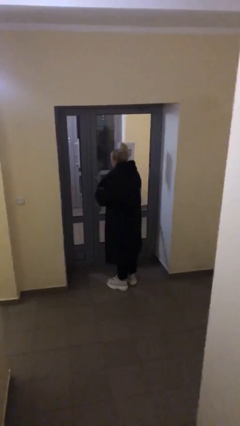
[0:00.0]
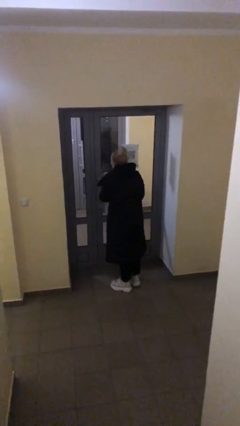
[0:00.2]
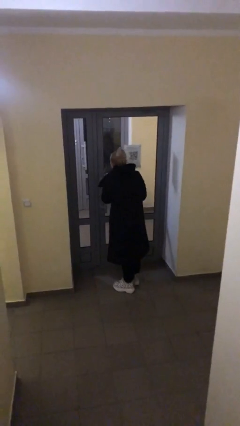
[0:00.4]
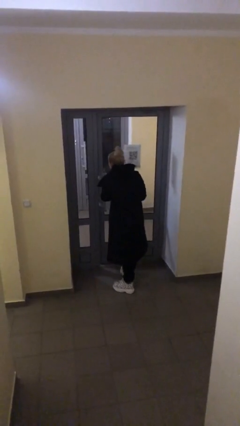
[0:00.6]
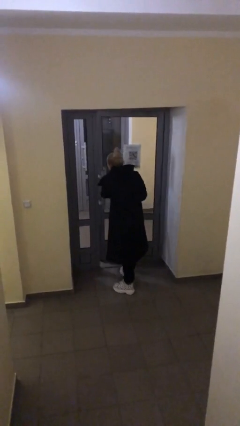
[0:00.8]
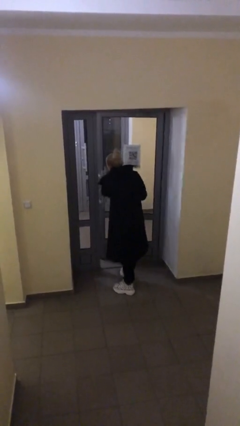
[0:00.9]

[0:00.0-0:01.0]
person opens facility door

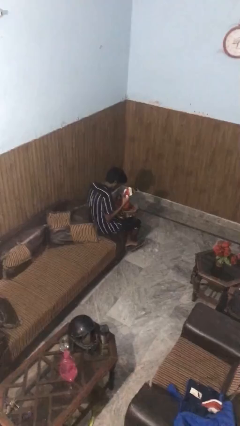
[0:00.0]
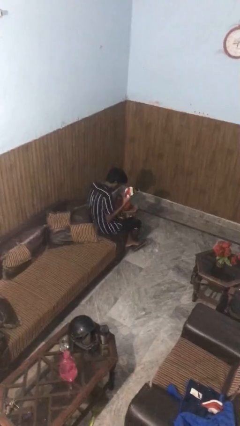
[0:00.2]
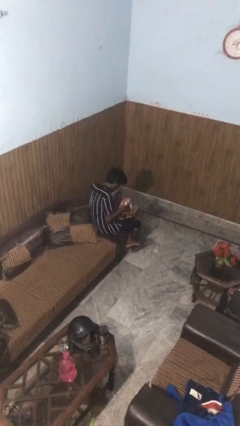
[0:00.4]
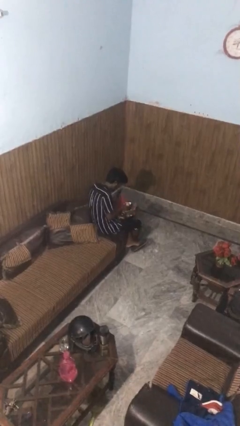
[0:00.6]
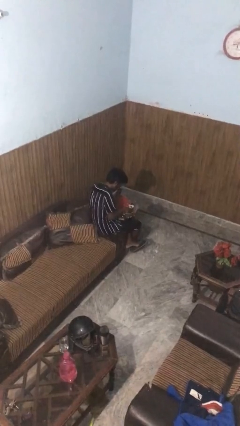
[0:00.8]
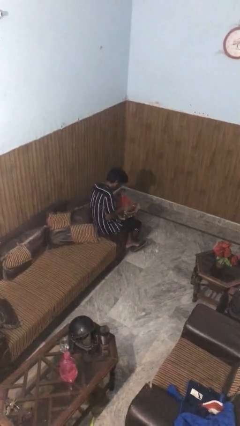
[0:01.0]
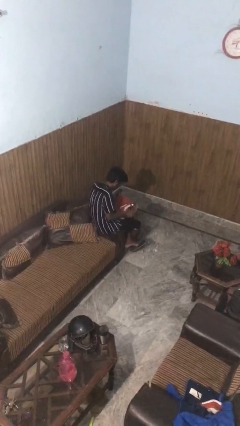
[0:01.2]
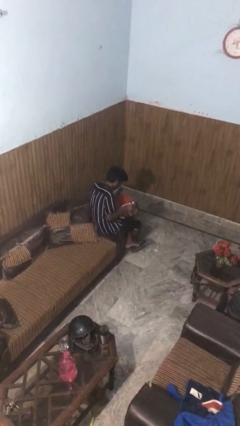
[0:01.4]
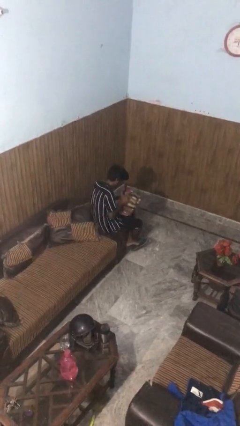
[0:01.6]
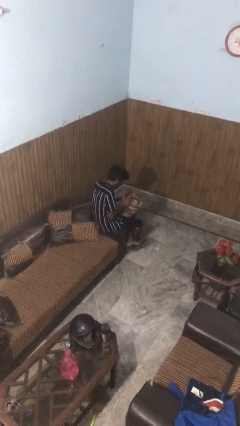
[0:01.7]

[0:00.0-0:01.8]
person puts object into purse

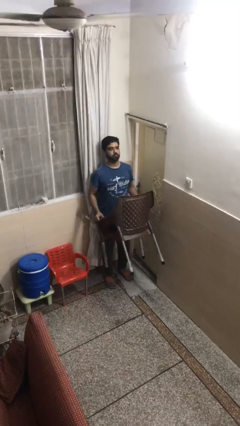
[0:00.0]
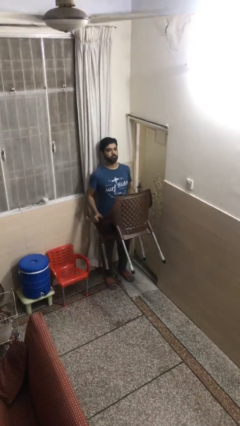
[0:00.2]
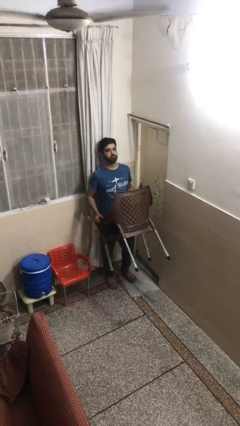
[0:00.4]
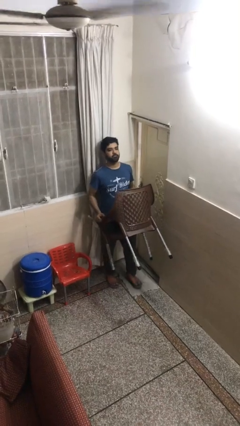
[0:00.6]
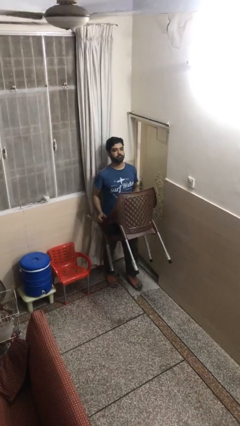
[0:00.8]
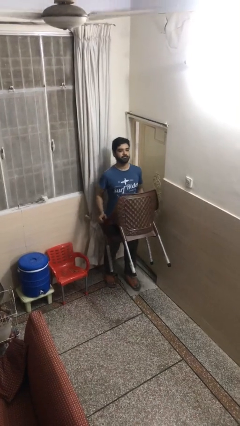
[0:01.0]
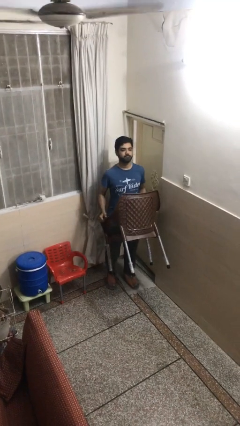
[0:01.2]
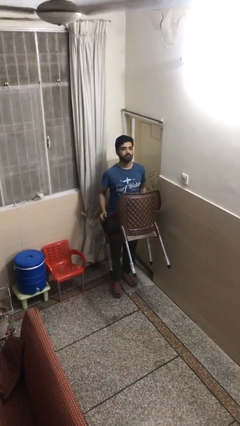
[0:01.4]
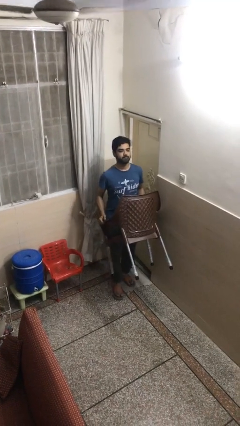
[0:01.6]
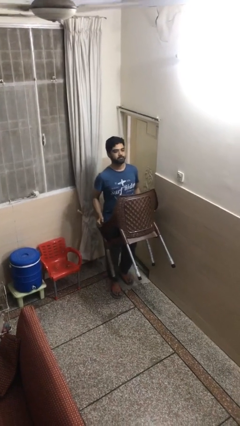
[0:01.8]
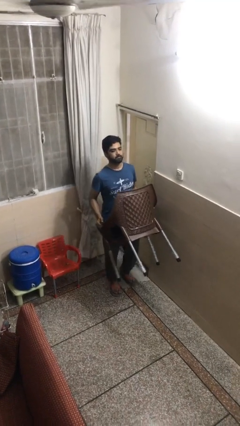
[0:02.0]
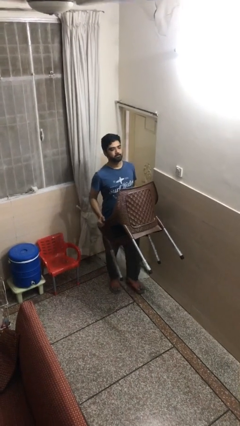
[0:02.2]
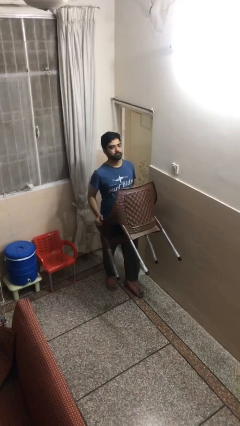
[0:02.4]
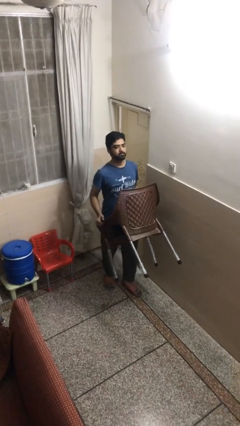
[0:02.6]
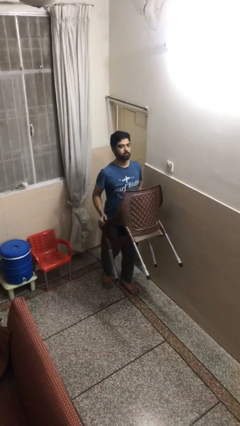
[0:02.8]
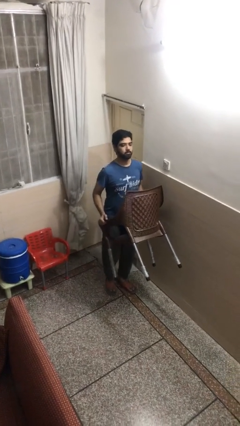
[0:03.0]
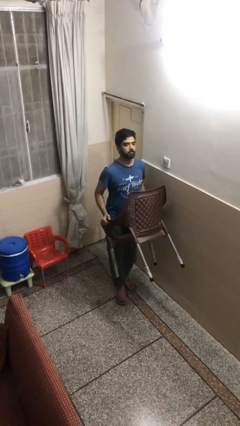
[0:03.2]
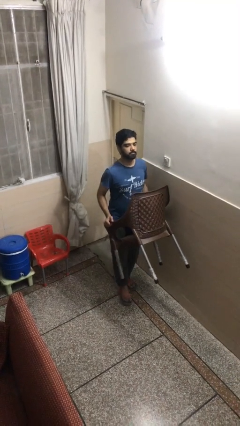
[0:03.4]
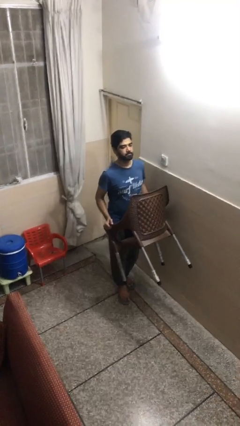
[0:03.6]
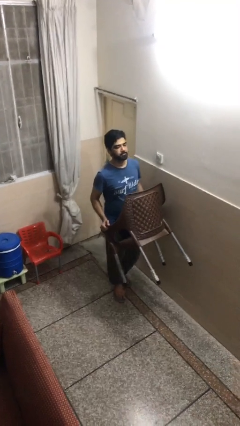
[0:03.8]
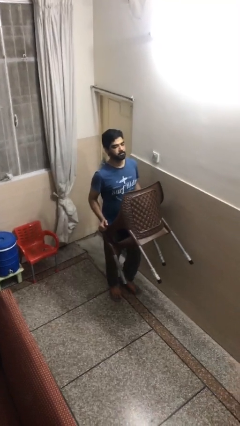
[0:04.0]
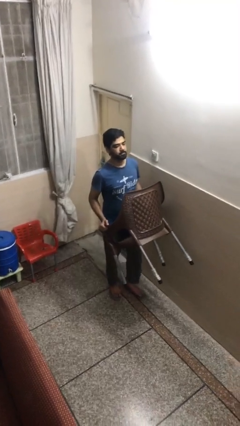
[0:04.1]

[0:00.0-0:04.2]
person carries heavy object

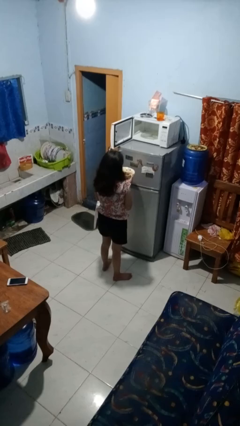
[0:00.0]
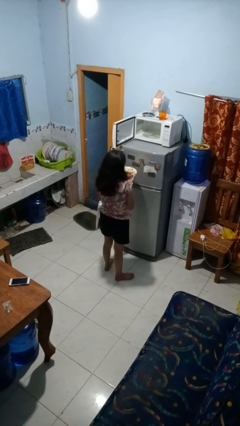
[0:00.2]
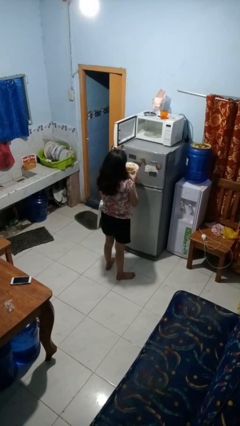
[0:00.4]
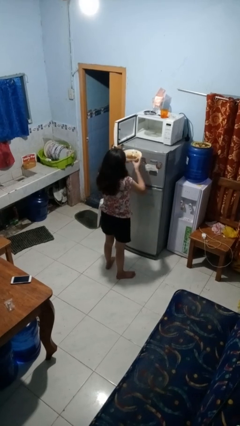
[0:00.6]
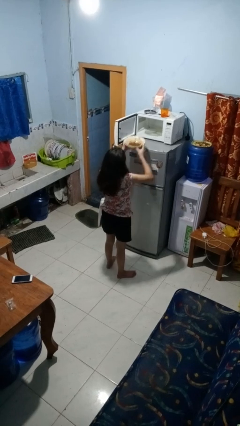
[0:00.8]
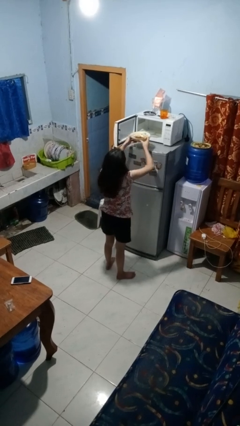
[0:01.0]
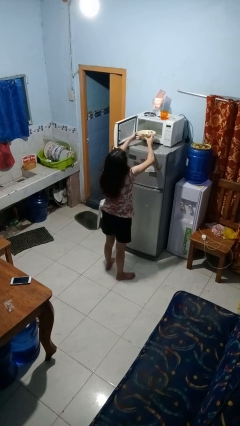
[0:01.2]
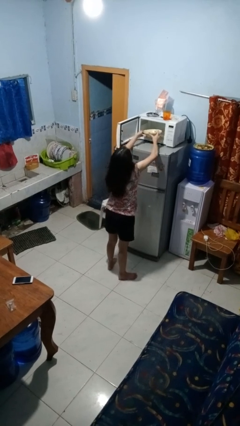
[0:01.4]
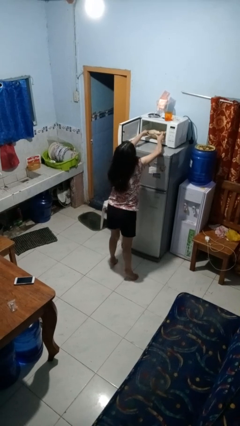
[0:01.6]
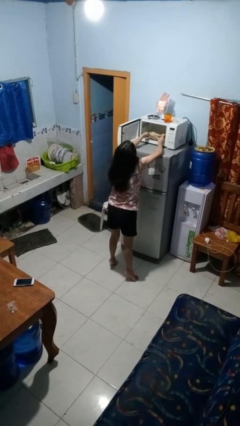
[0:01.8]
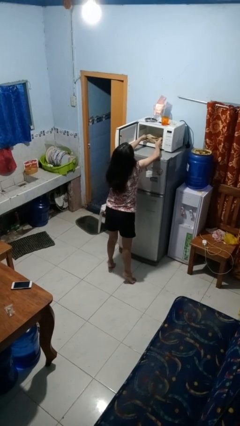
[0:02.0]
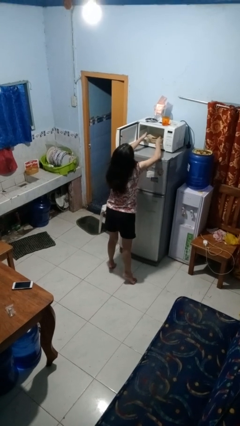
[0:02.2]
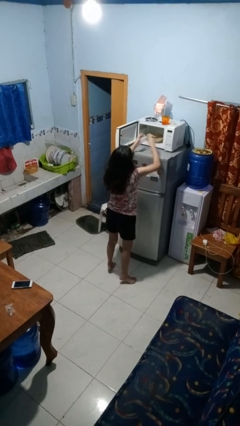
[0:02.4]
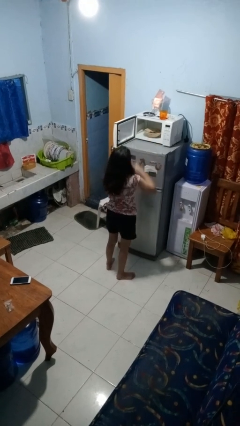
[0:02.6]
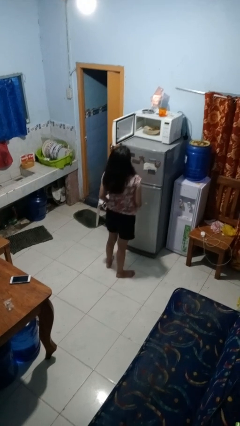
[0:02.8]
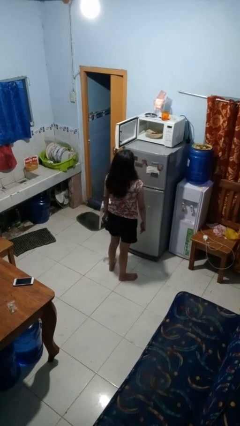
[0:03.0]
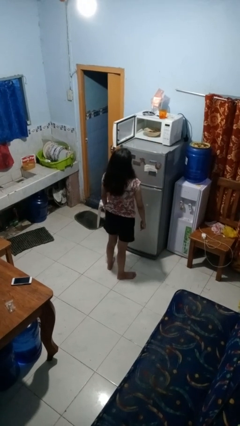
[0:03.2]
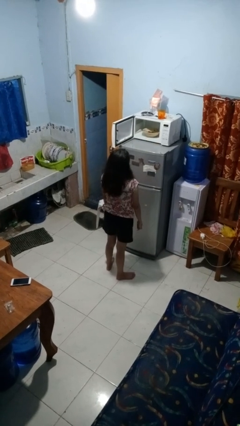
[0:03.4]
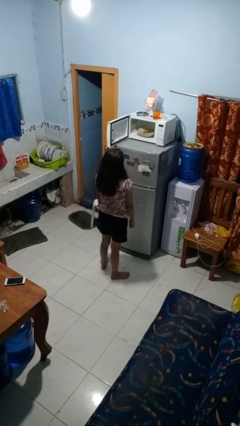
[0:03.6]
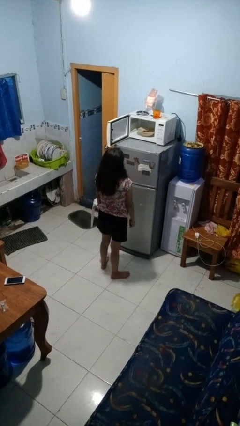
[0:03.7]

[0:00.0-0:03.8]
person puts object into microwave

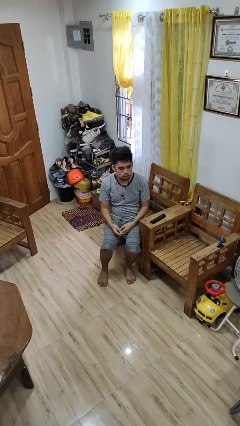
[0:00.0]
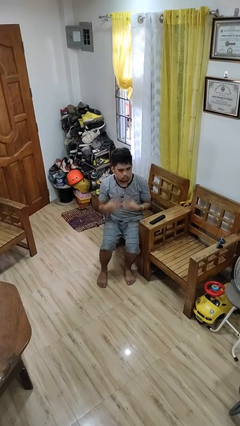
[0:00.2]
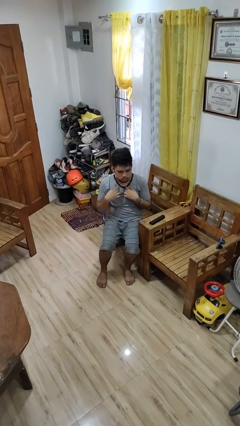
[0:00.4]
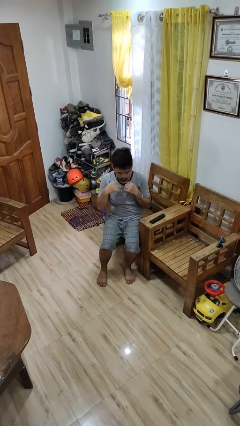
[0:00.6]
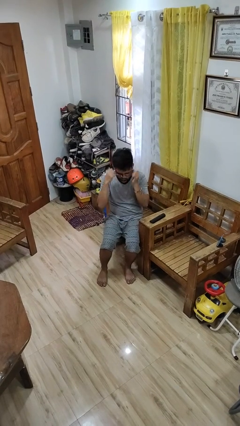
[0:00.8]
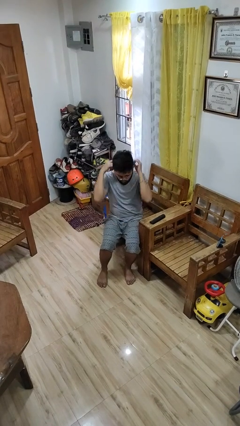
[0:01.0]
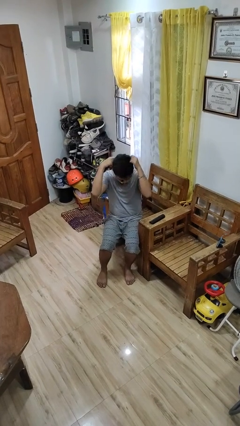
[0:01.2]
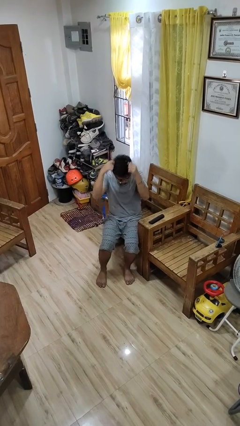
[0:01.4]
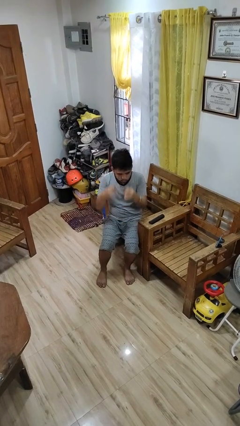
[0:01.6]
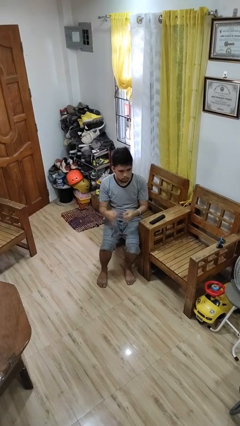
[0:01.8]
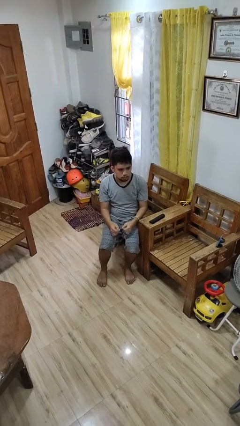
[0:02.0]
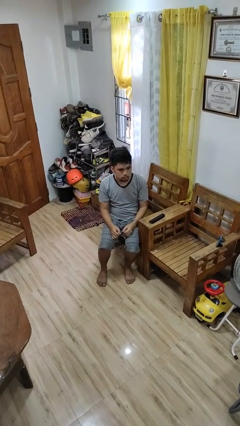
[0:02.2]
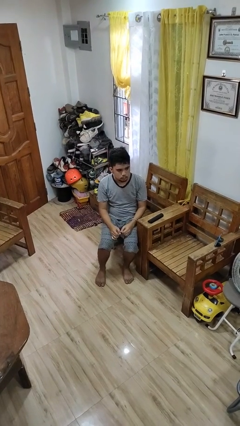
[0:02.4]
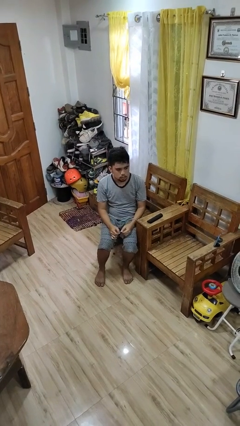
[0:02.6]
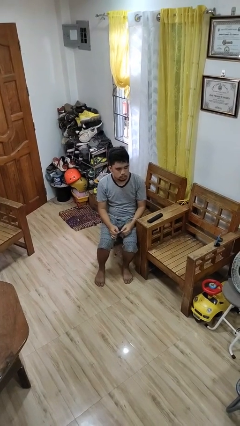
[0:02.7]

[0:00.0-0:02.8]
person takes off necklace

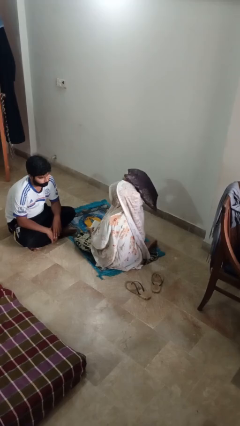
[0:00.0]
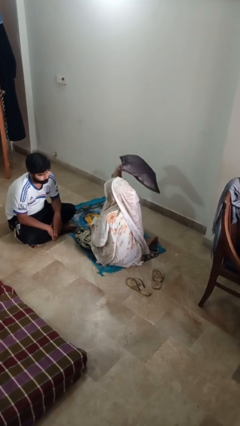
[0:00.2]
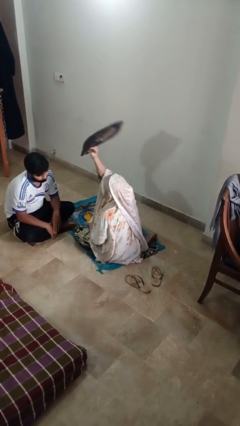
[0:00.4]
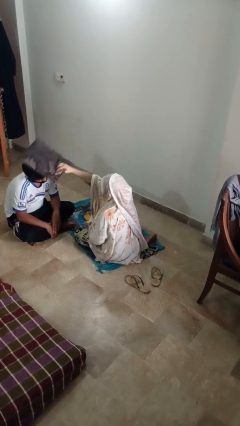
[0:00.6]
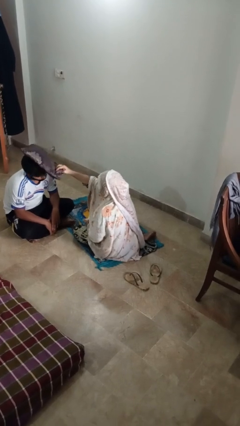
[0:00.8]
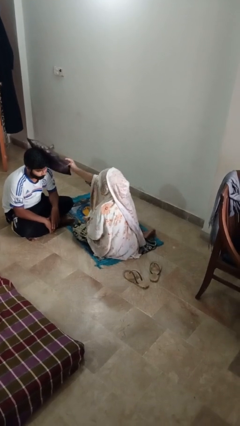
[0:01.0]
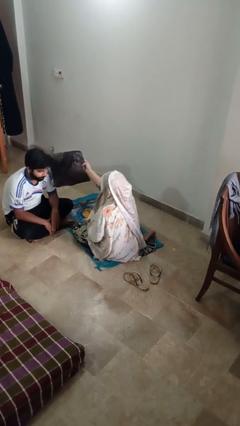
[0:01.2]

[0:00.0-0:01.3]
person hits person with pillow

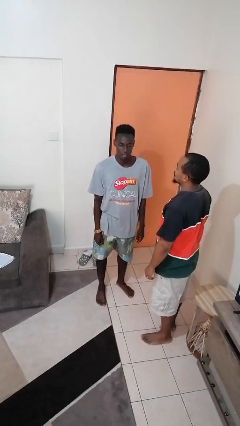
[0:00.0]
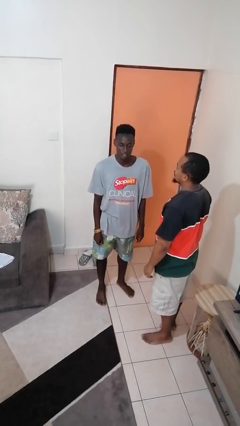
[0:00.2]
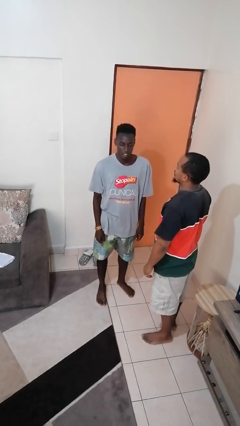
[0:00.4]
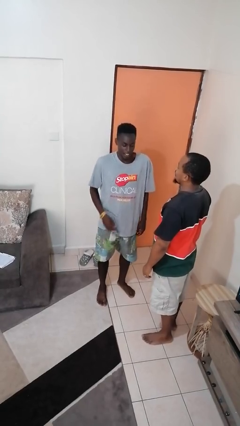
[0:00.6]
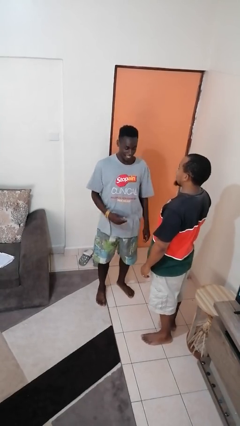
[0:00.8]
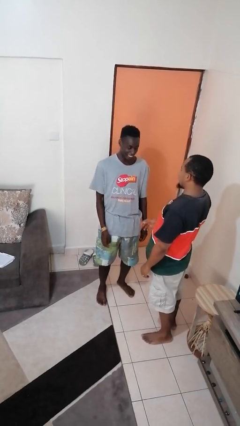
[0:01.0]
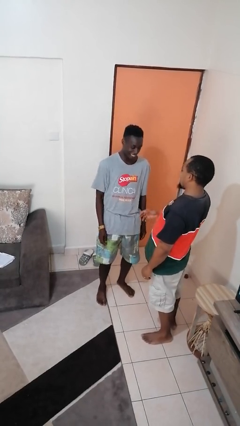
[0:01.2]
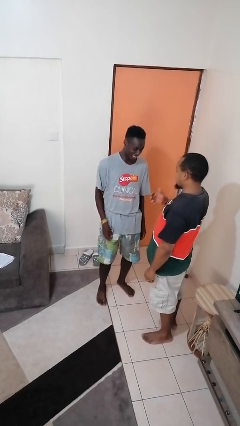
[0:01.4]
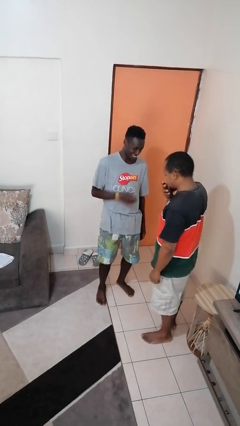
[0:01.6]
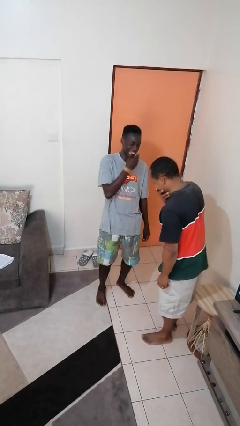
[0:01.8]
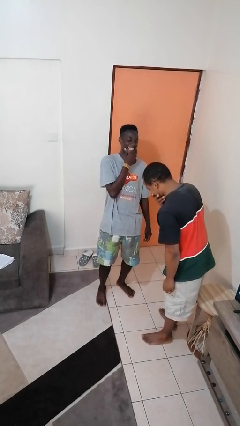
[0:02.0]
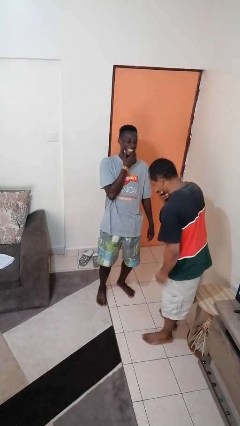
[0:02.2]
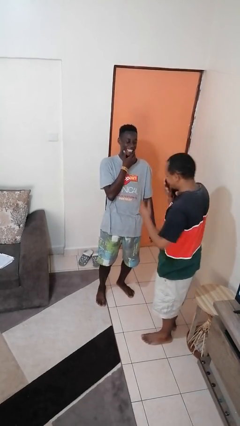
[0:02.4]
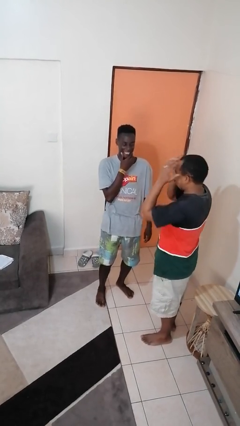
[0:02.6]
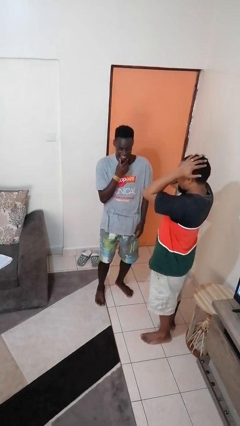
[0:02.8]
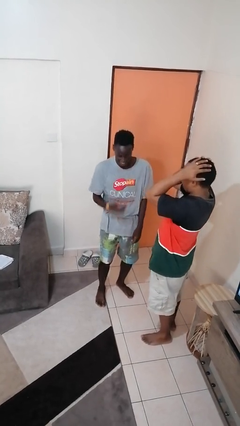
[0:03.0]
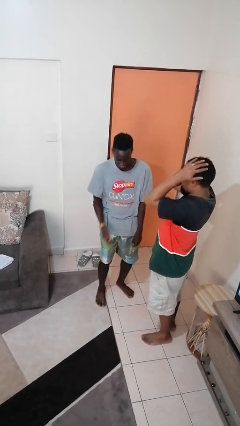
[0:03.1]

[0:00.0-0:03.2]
person laughs with person
